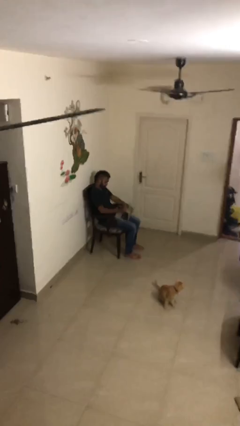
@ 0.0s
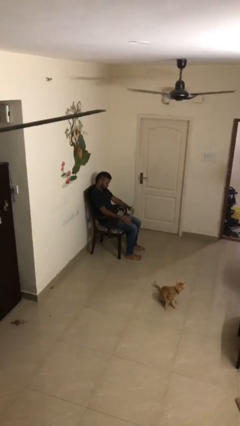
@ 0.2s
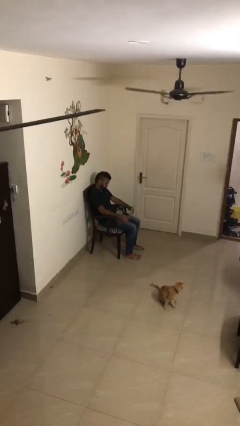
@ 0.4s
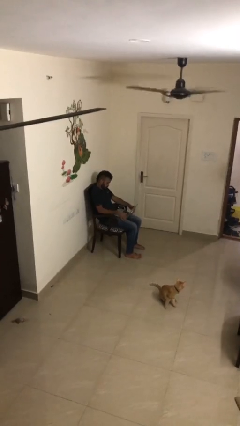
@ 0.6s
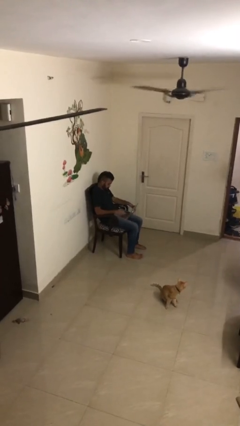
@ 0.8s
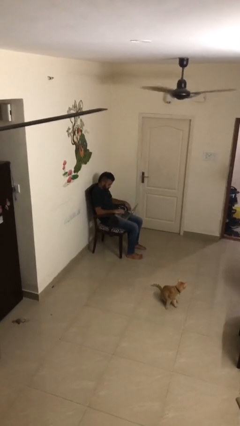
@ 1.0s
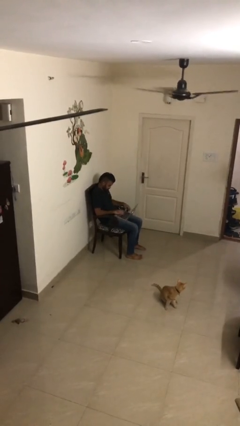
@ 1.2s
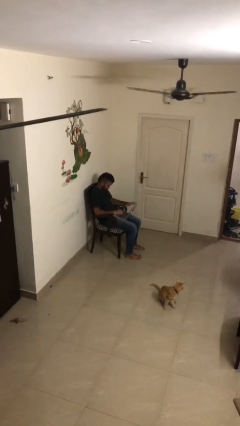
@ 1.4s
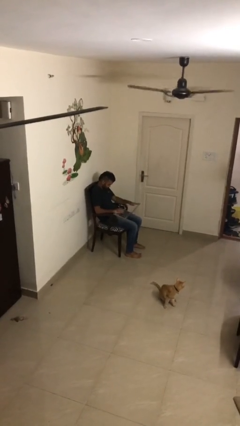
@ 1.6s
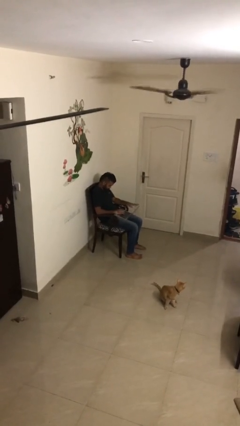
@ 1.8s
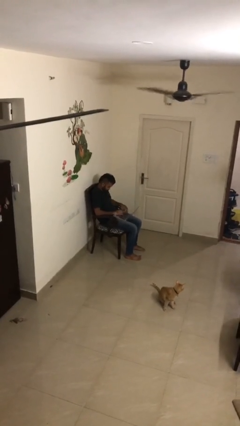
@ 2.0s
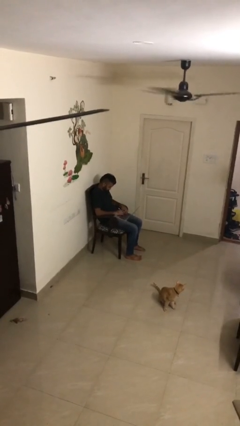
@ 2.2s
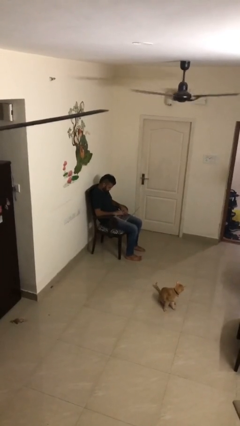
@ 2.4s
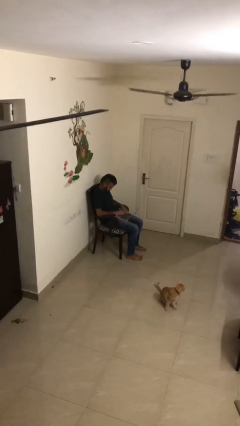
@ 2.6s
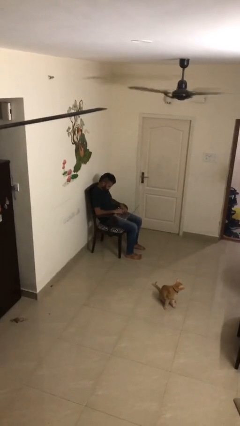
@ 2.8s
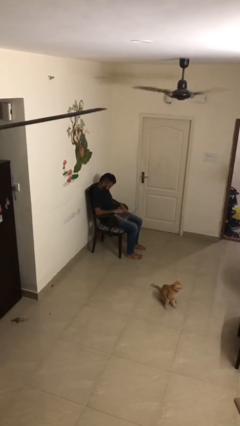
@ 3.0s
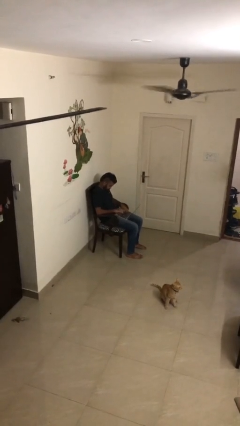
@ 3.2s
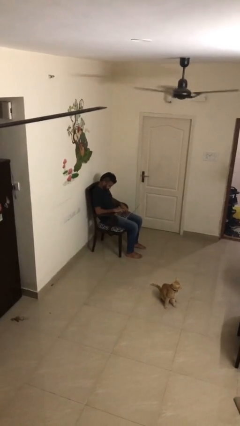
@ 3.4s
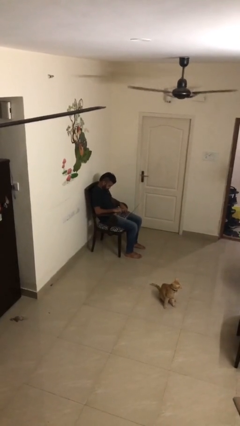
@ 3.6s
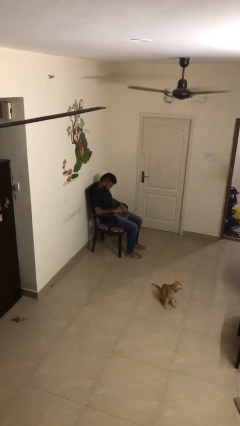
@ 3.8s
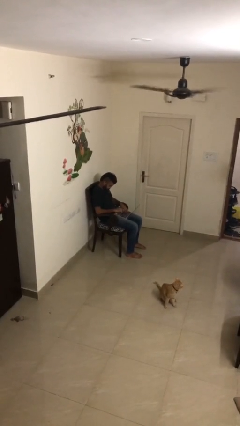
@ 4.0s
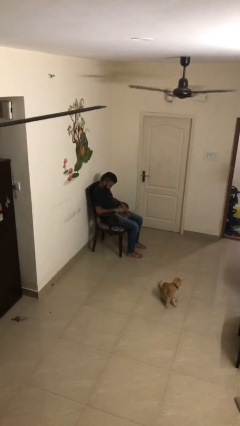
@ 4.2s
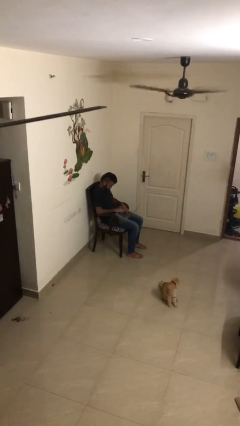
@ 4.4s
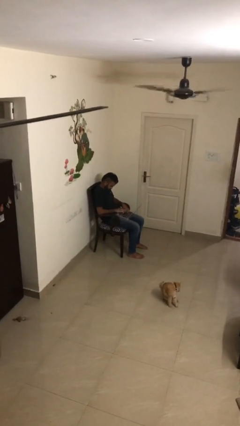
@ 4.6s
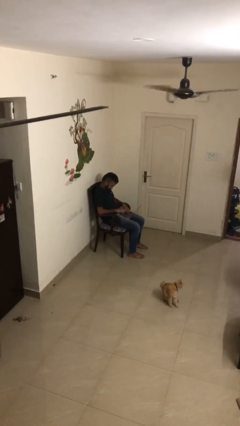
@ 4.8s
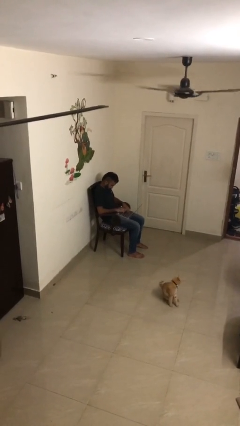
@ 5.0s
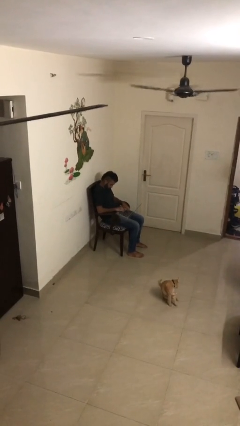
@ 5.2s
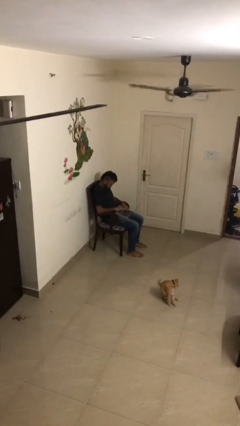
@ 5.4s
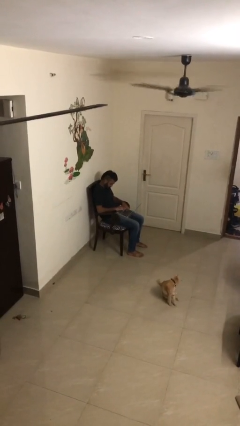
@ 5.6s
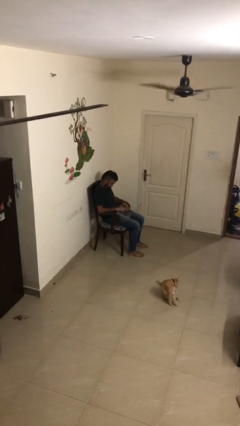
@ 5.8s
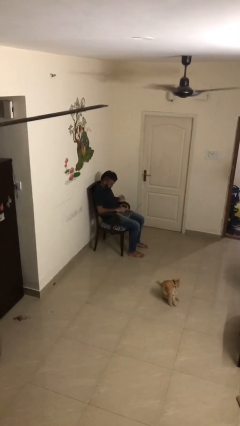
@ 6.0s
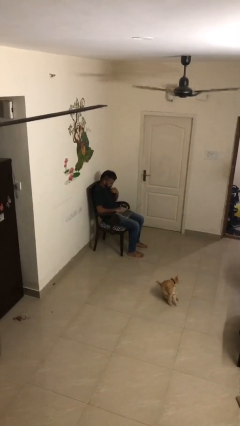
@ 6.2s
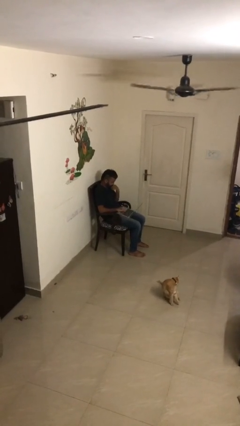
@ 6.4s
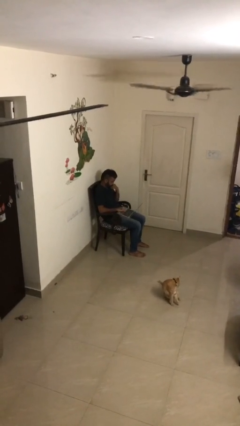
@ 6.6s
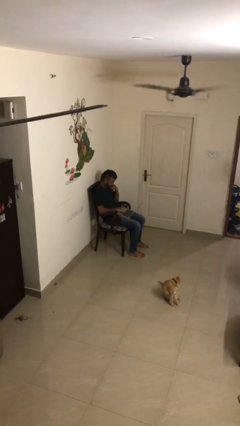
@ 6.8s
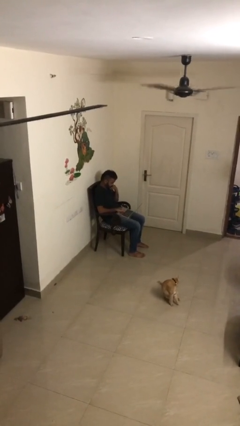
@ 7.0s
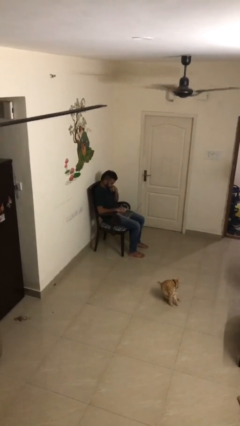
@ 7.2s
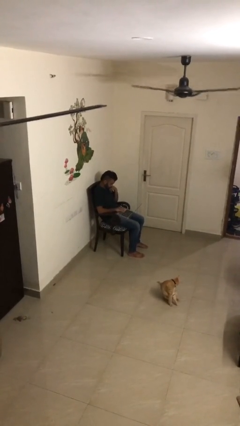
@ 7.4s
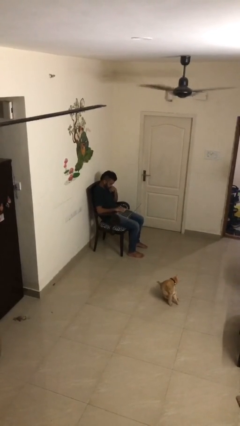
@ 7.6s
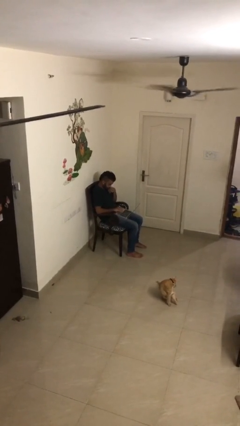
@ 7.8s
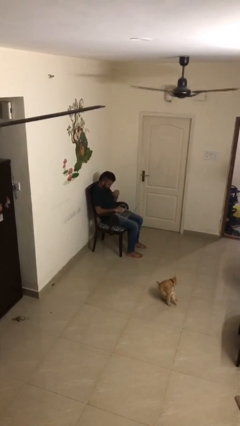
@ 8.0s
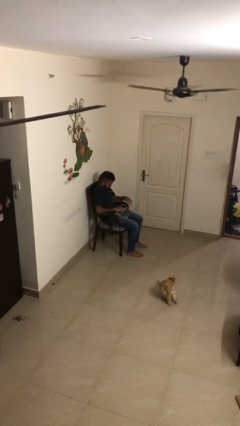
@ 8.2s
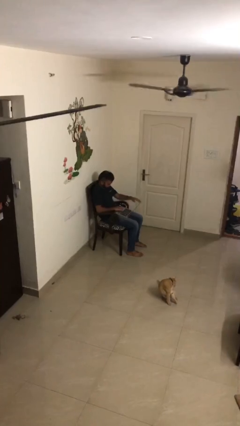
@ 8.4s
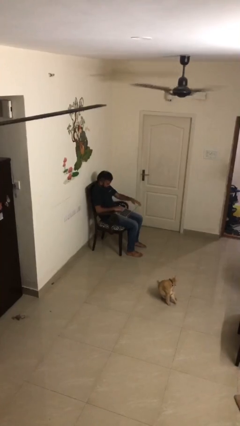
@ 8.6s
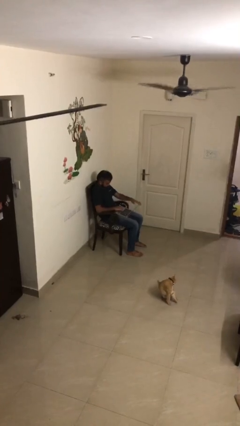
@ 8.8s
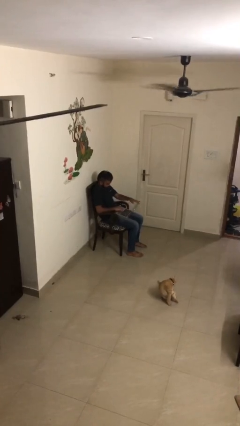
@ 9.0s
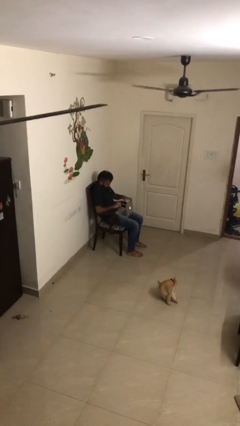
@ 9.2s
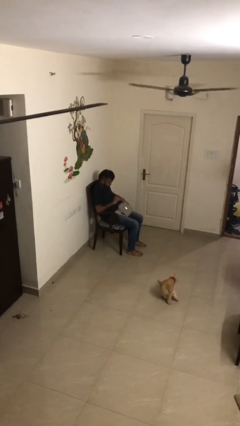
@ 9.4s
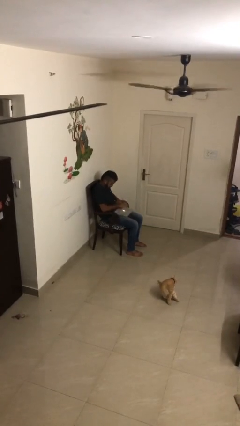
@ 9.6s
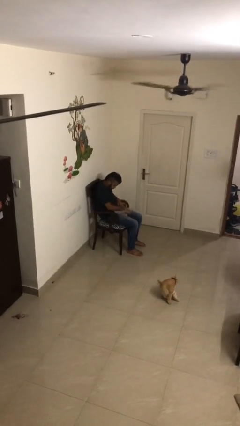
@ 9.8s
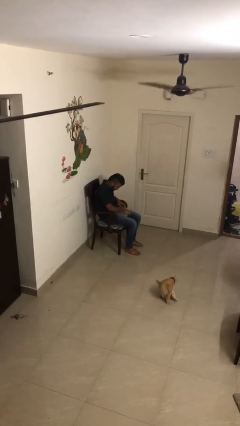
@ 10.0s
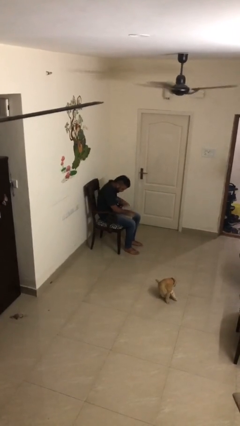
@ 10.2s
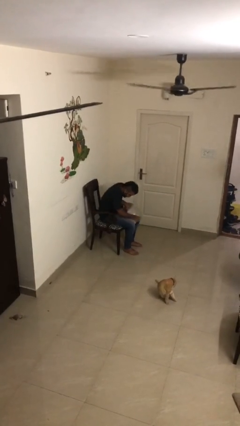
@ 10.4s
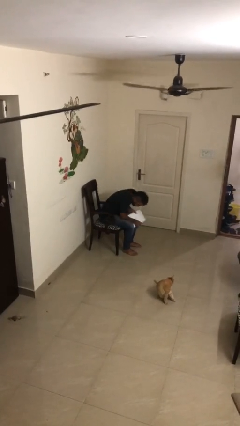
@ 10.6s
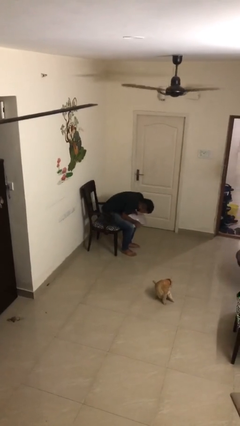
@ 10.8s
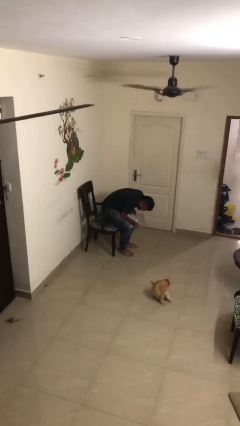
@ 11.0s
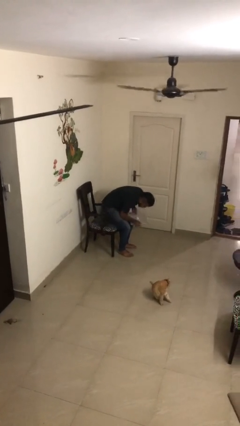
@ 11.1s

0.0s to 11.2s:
person interacts with laptop

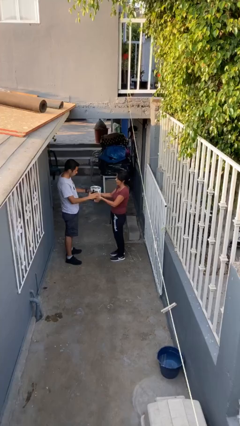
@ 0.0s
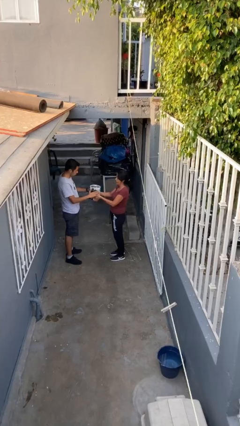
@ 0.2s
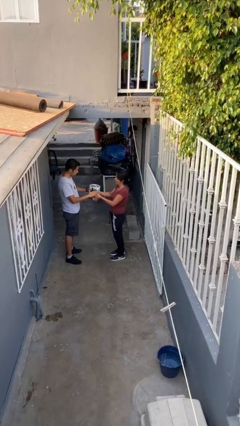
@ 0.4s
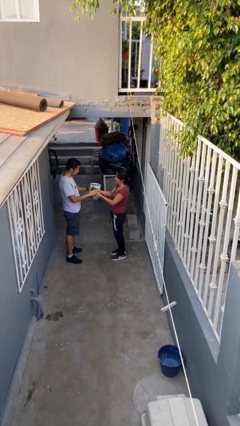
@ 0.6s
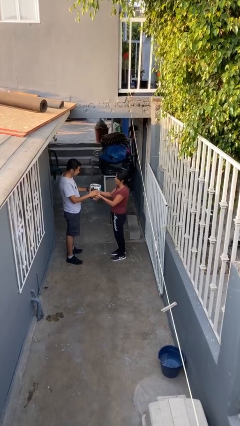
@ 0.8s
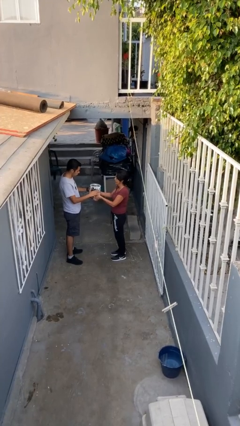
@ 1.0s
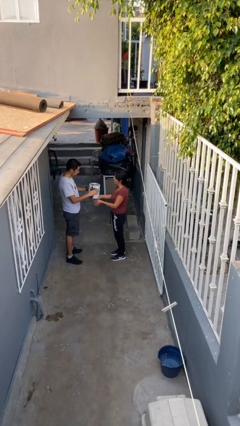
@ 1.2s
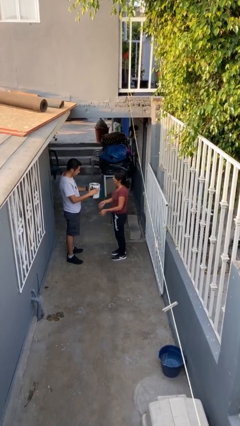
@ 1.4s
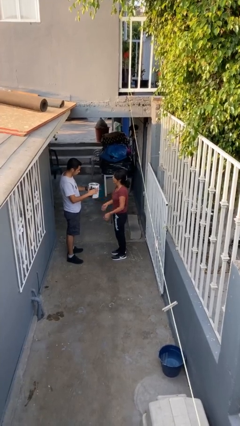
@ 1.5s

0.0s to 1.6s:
person transfers object to person

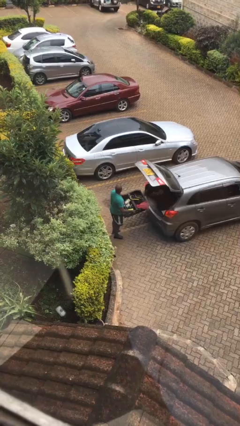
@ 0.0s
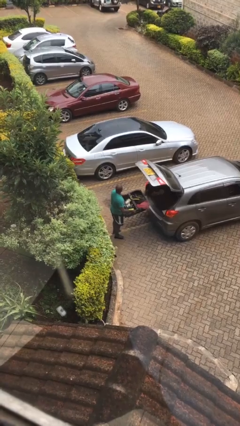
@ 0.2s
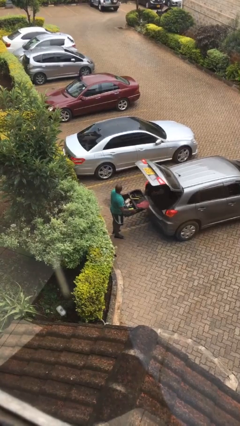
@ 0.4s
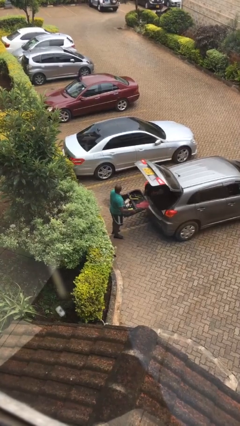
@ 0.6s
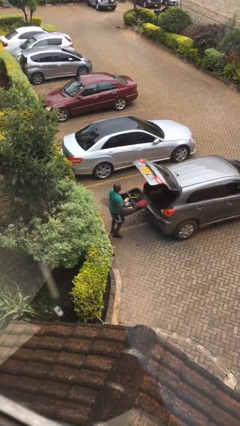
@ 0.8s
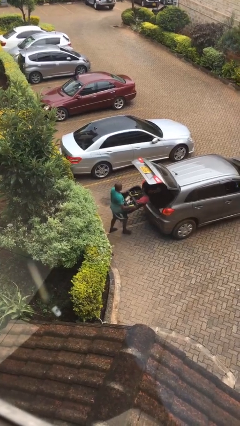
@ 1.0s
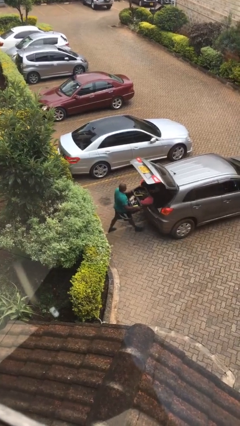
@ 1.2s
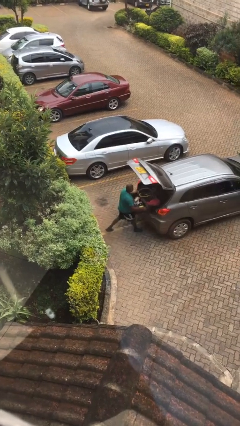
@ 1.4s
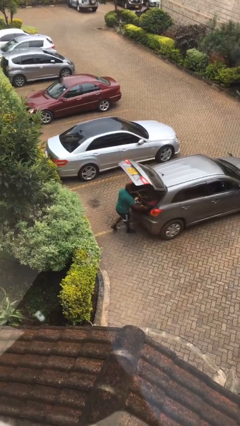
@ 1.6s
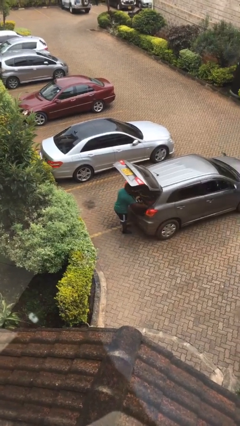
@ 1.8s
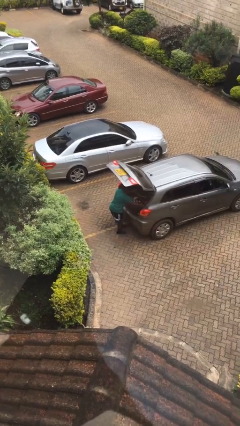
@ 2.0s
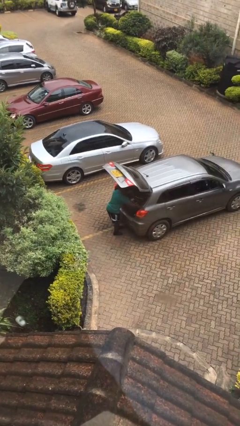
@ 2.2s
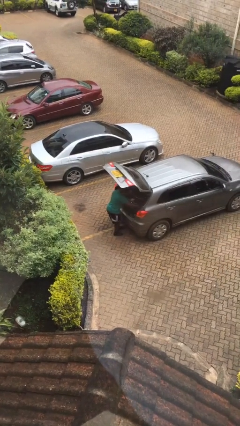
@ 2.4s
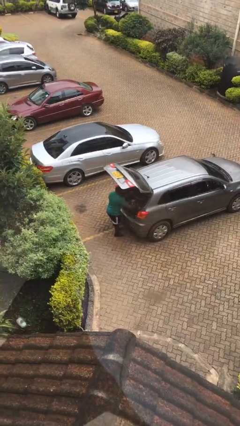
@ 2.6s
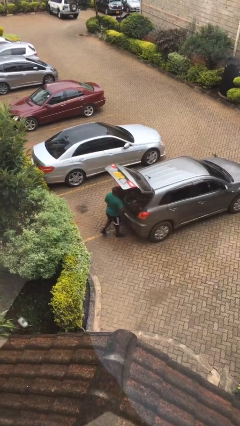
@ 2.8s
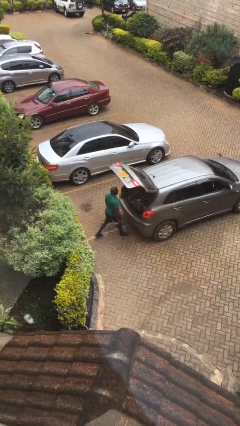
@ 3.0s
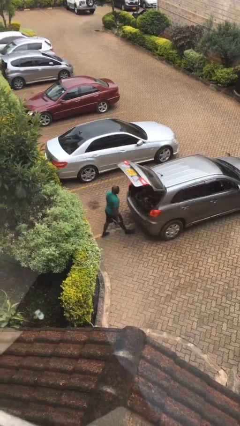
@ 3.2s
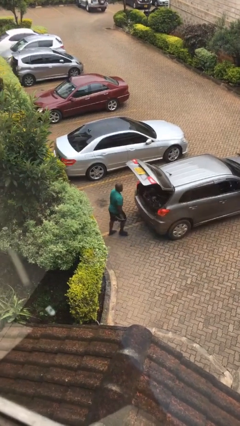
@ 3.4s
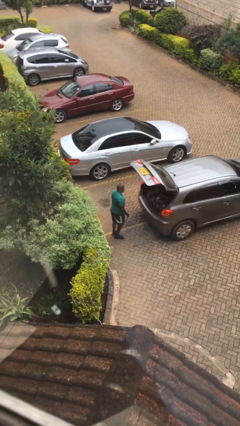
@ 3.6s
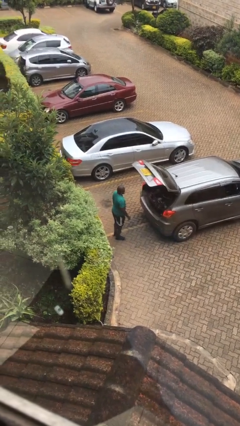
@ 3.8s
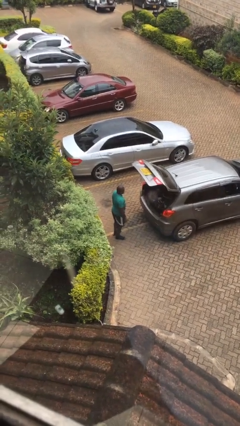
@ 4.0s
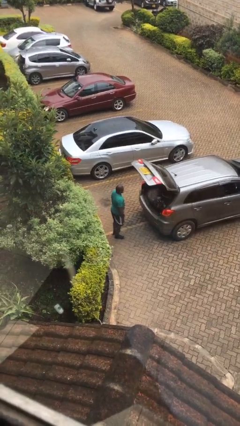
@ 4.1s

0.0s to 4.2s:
person loads car

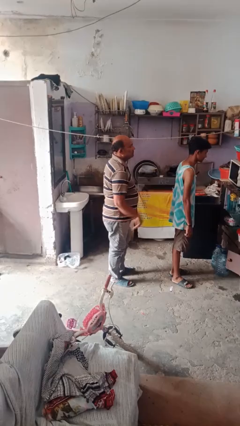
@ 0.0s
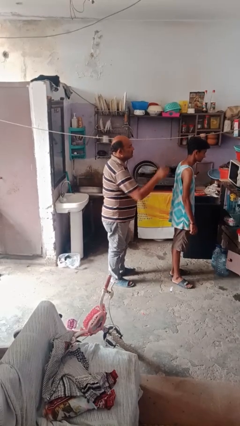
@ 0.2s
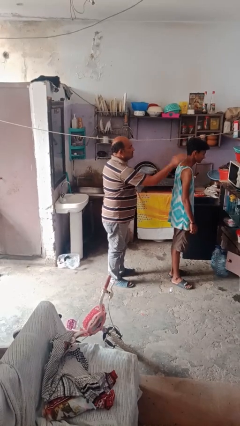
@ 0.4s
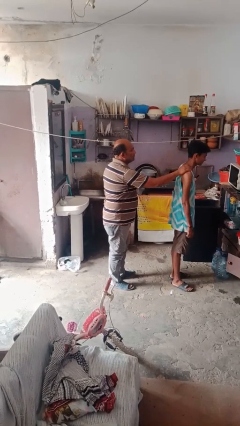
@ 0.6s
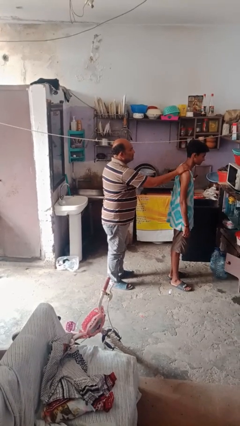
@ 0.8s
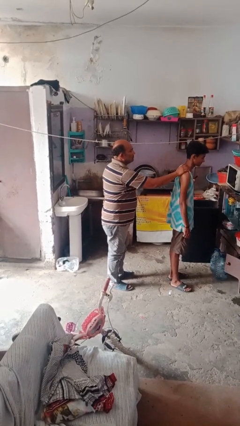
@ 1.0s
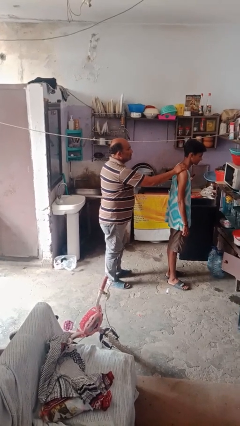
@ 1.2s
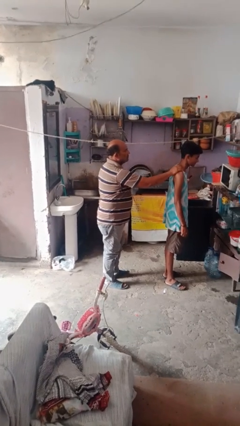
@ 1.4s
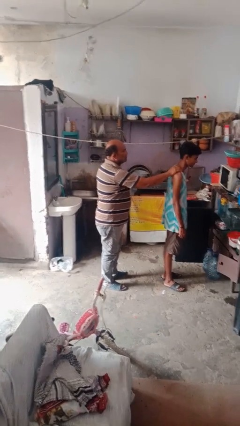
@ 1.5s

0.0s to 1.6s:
person grabs person by shoulder
